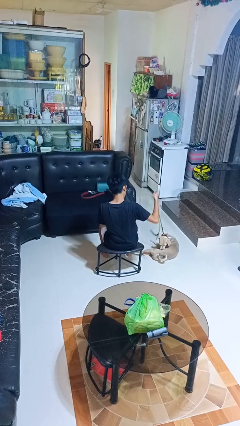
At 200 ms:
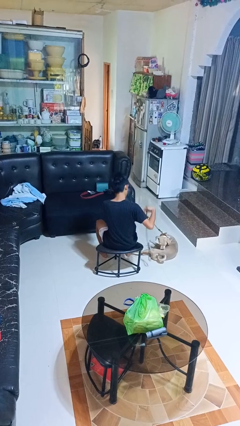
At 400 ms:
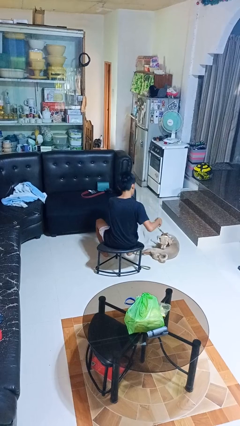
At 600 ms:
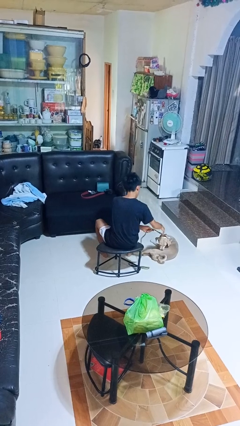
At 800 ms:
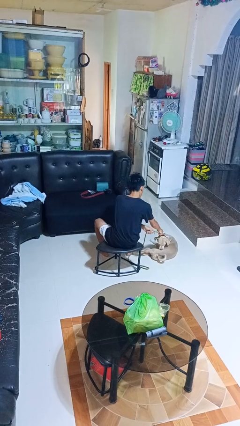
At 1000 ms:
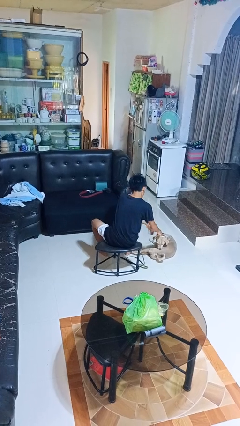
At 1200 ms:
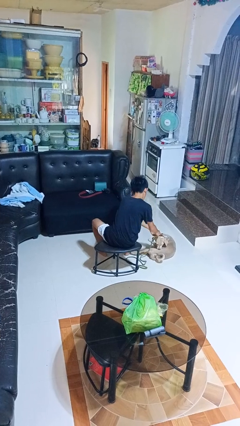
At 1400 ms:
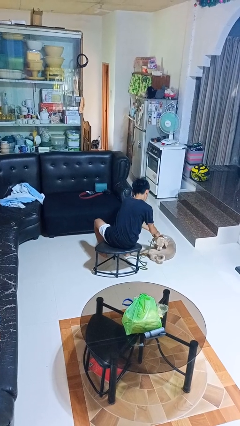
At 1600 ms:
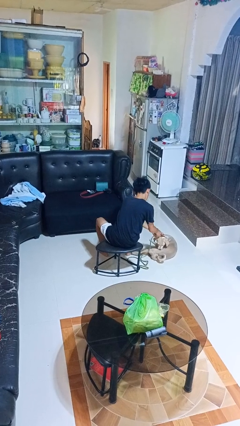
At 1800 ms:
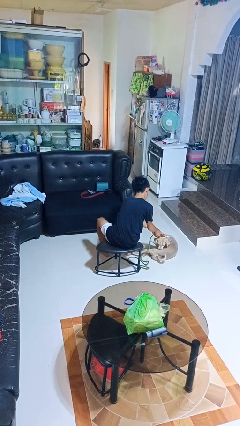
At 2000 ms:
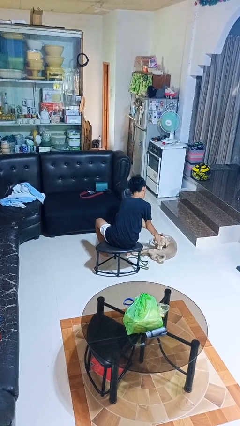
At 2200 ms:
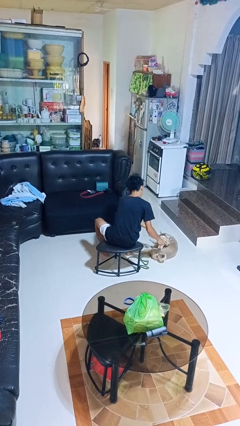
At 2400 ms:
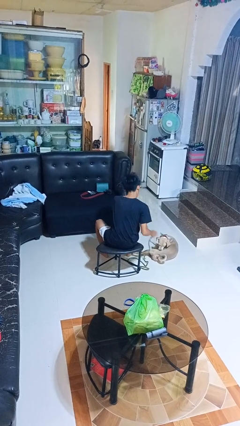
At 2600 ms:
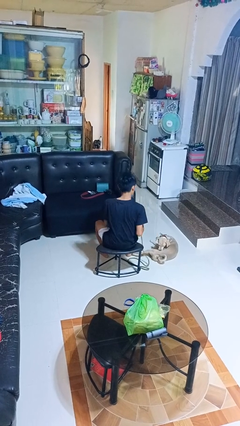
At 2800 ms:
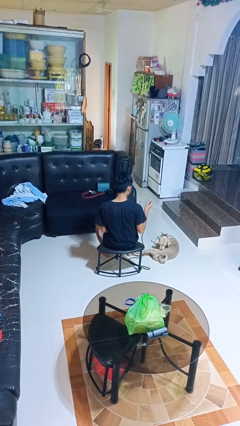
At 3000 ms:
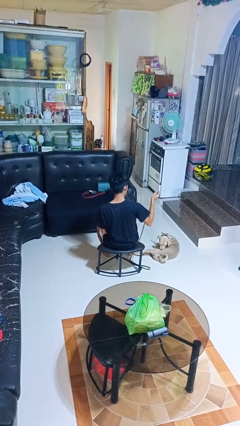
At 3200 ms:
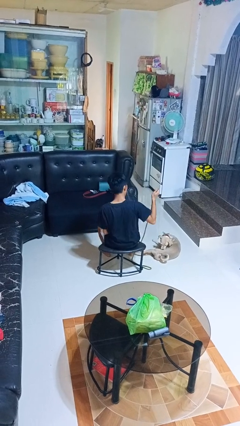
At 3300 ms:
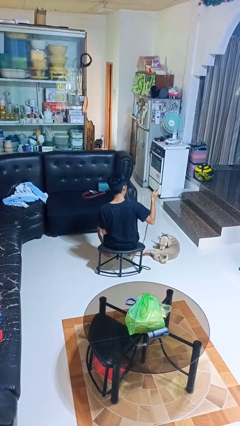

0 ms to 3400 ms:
person unattaches leash from dog

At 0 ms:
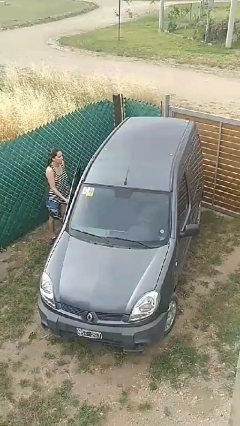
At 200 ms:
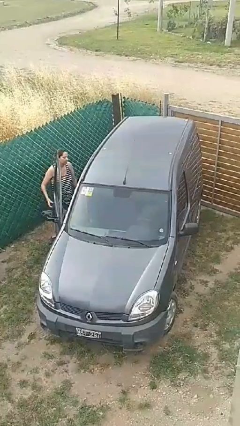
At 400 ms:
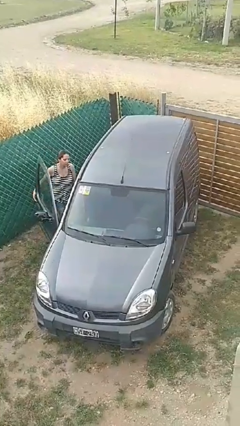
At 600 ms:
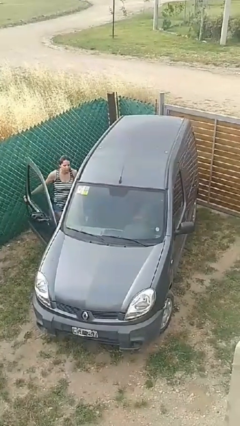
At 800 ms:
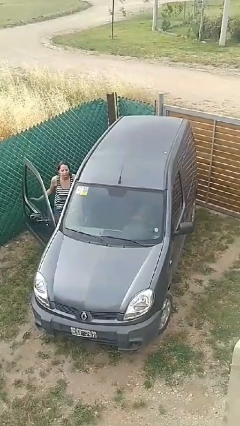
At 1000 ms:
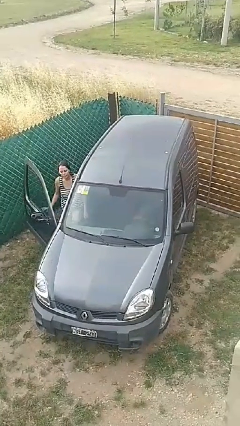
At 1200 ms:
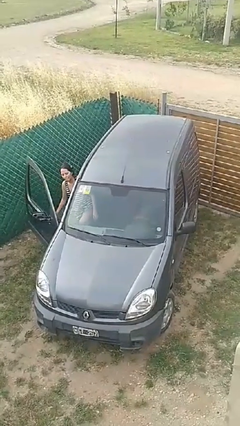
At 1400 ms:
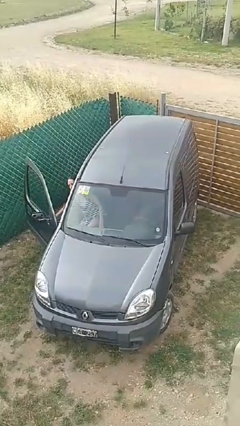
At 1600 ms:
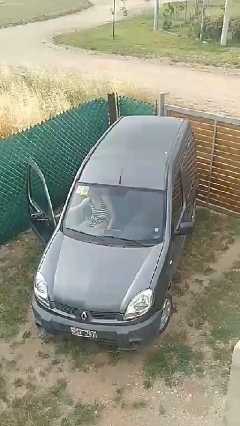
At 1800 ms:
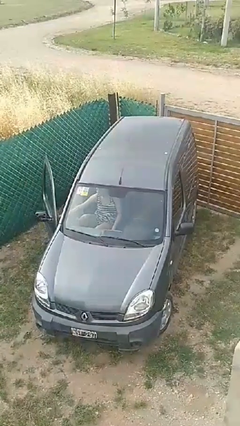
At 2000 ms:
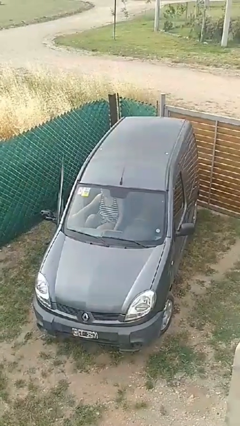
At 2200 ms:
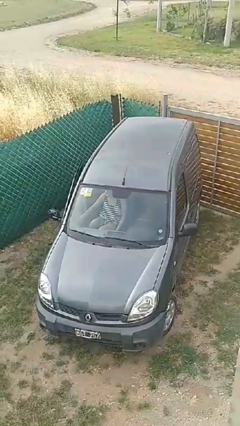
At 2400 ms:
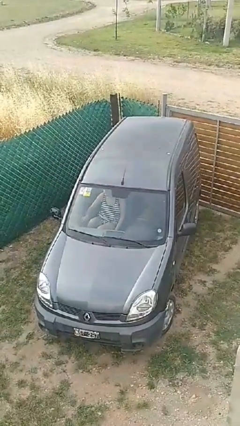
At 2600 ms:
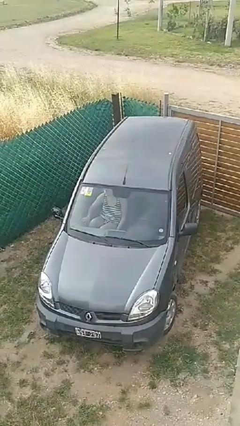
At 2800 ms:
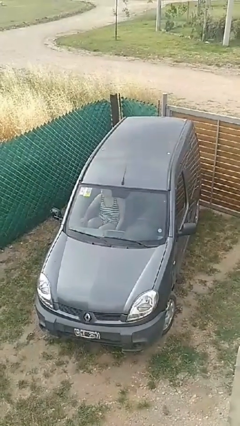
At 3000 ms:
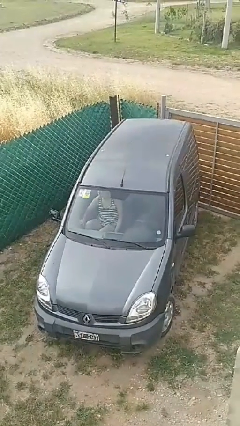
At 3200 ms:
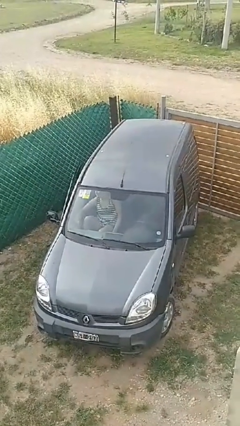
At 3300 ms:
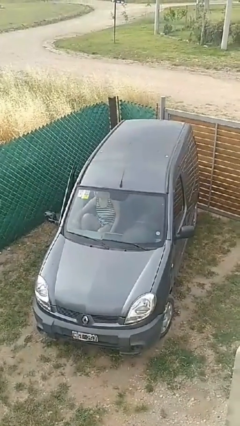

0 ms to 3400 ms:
car picks up person

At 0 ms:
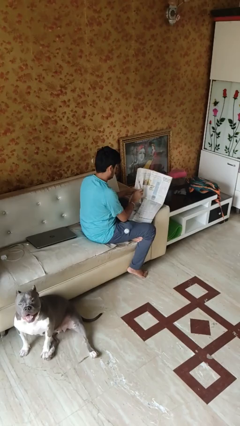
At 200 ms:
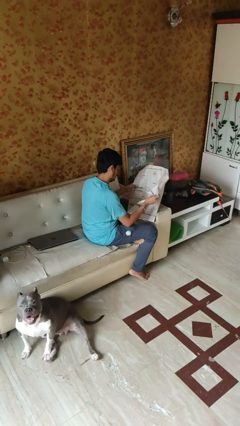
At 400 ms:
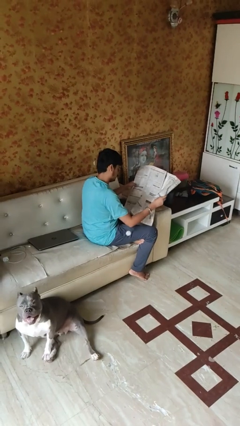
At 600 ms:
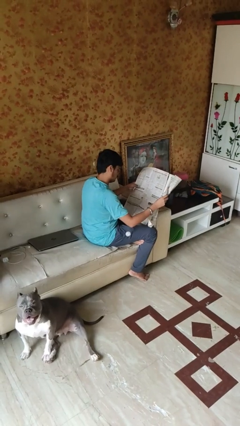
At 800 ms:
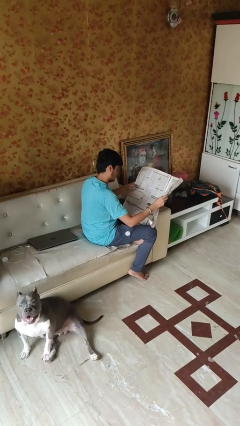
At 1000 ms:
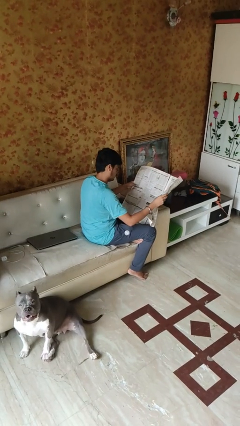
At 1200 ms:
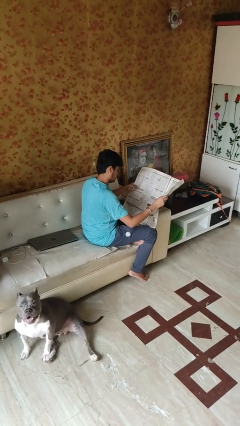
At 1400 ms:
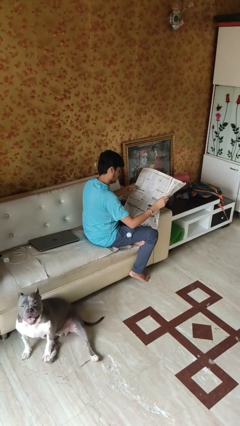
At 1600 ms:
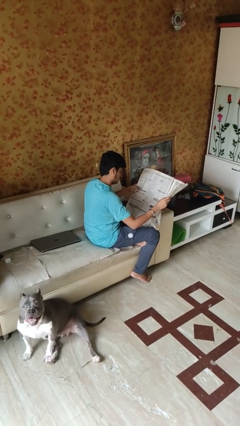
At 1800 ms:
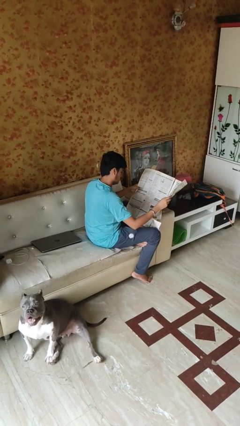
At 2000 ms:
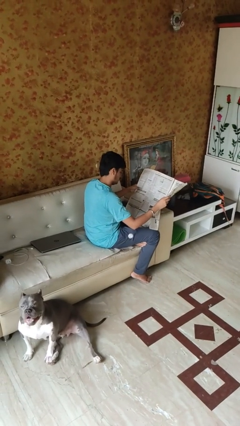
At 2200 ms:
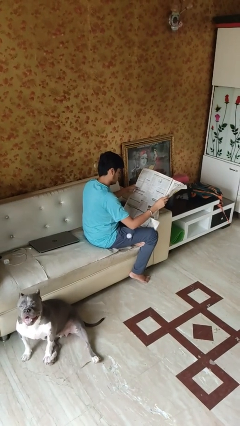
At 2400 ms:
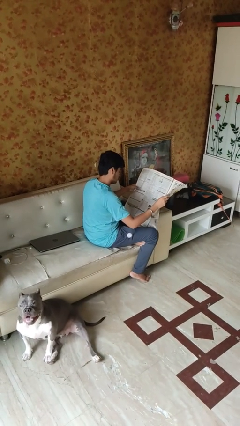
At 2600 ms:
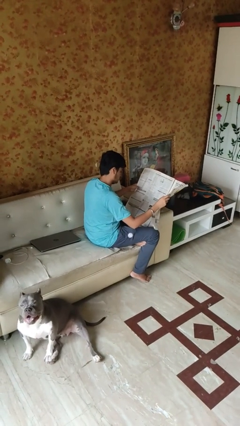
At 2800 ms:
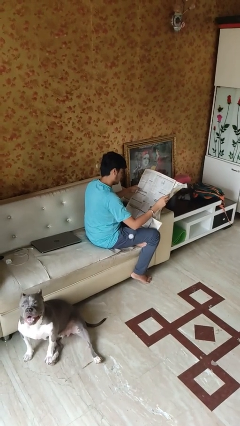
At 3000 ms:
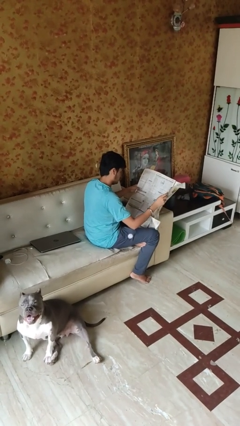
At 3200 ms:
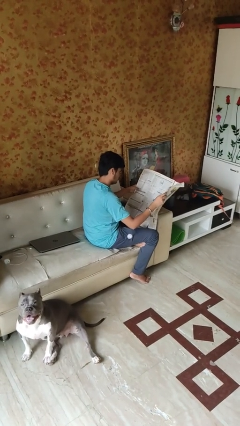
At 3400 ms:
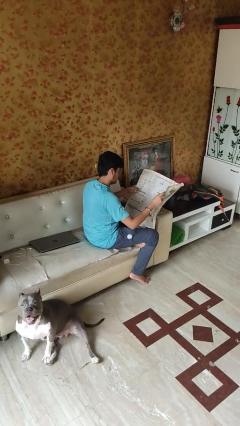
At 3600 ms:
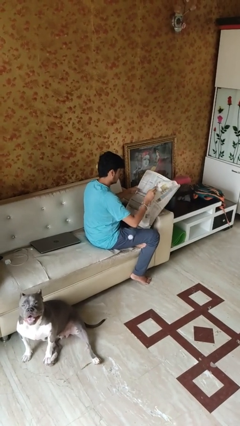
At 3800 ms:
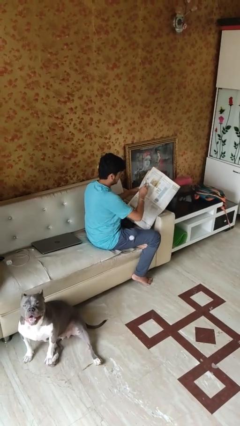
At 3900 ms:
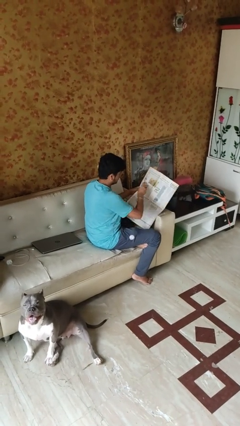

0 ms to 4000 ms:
person reads newspaper

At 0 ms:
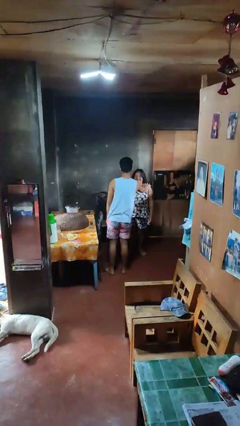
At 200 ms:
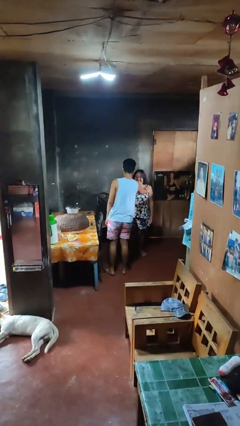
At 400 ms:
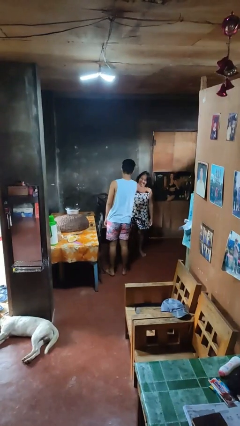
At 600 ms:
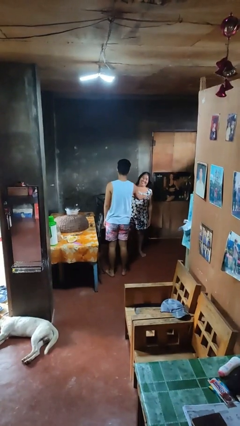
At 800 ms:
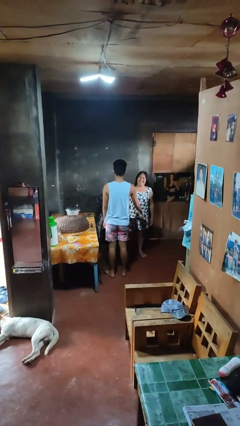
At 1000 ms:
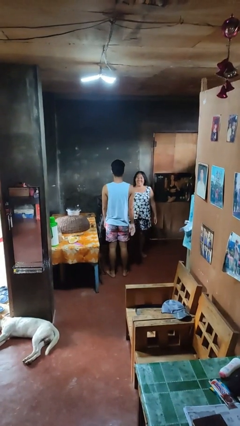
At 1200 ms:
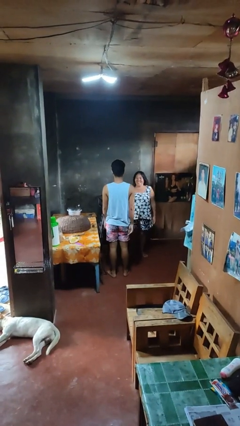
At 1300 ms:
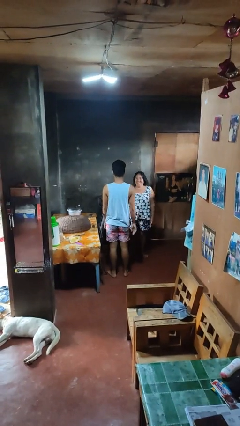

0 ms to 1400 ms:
person shoves person

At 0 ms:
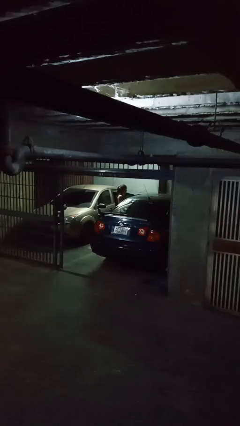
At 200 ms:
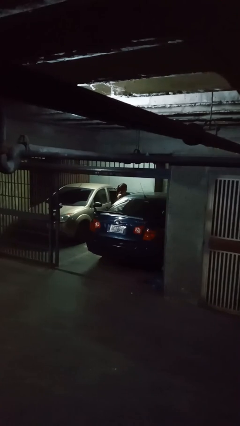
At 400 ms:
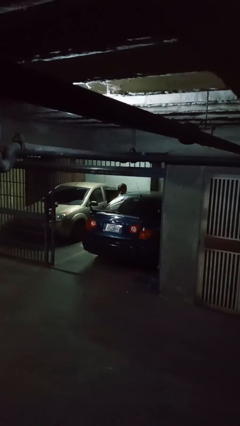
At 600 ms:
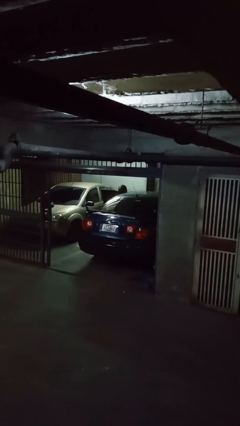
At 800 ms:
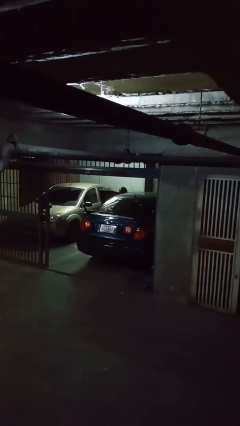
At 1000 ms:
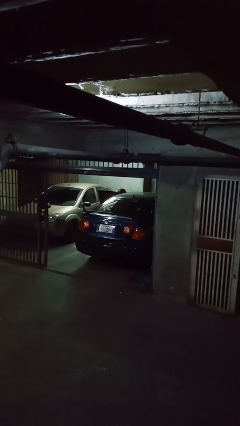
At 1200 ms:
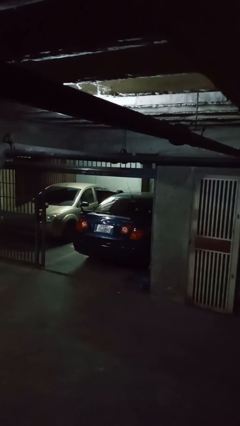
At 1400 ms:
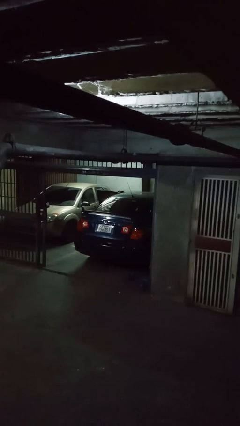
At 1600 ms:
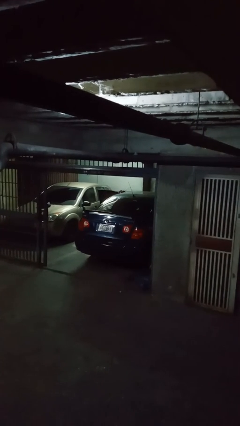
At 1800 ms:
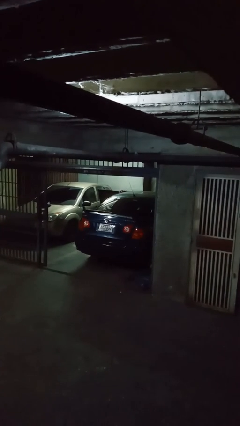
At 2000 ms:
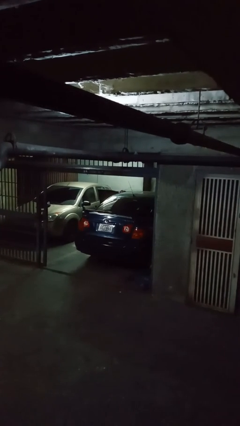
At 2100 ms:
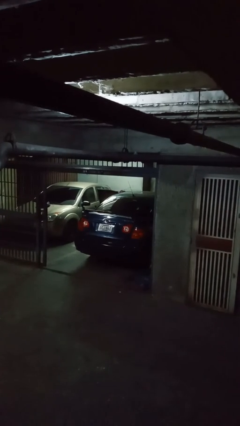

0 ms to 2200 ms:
person loads car

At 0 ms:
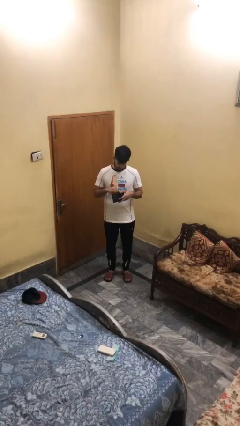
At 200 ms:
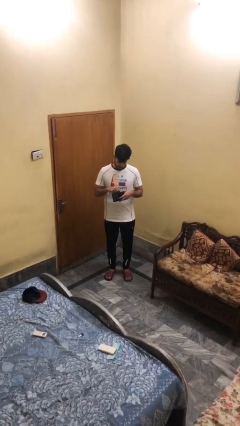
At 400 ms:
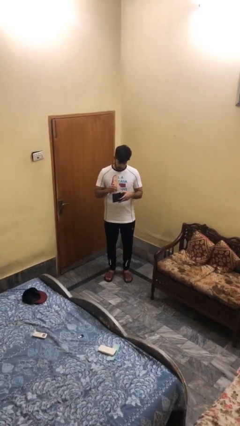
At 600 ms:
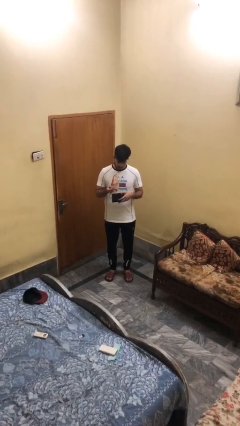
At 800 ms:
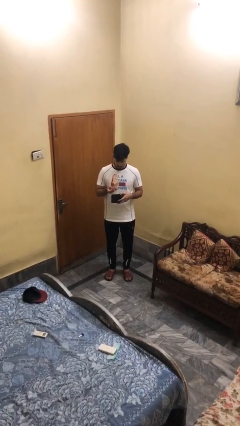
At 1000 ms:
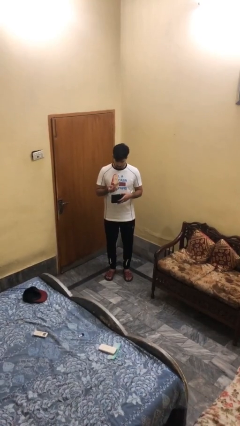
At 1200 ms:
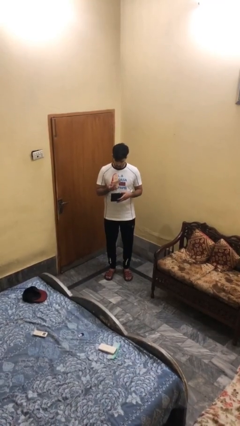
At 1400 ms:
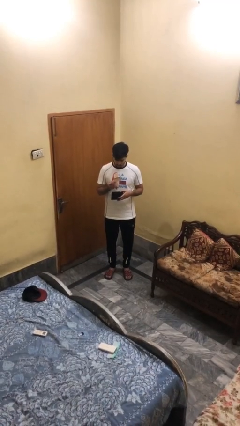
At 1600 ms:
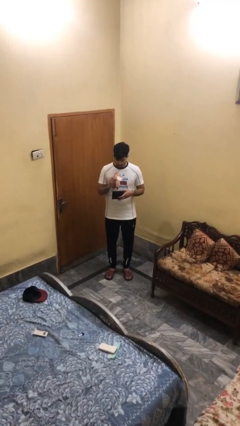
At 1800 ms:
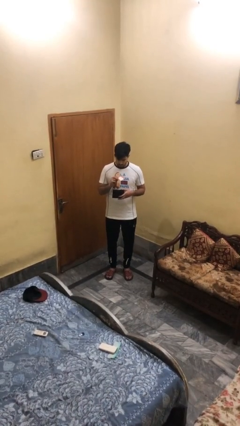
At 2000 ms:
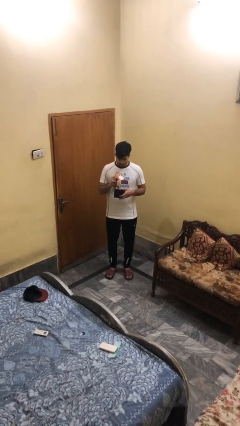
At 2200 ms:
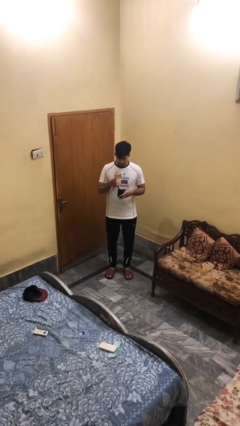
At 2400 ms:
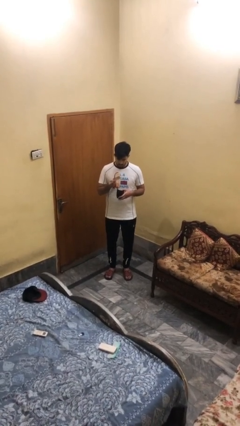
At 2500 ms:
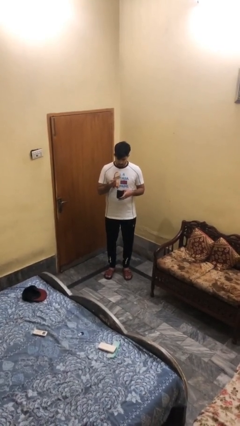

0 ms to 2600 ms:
person takes object from purse
